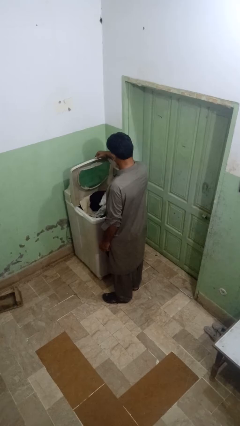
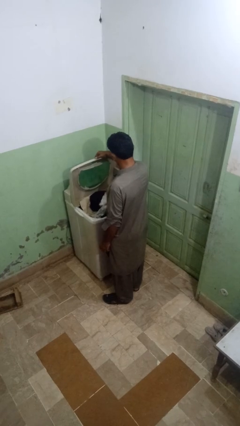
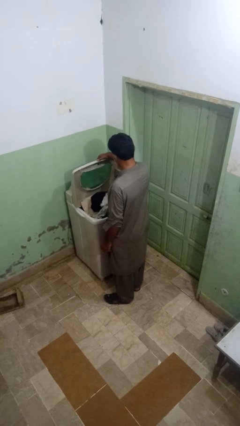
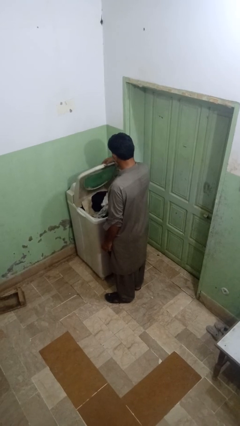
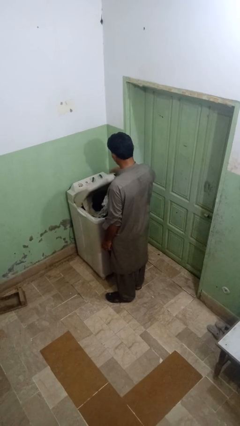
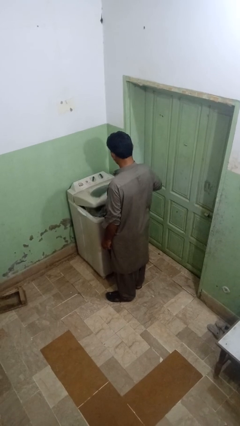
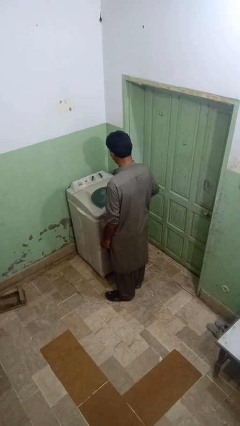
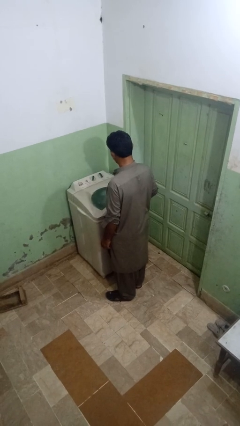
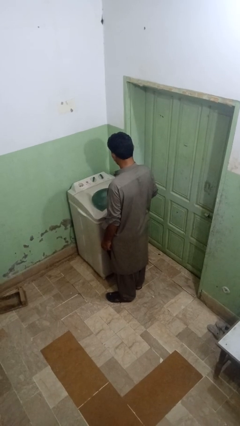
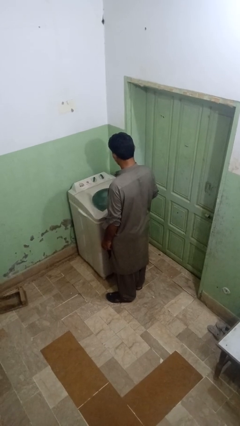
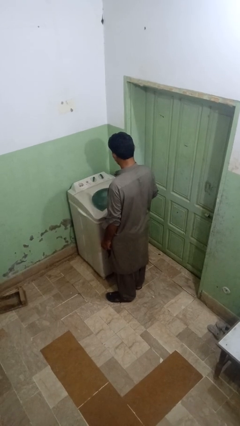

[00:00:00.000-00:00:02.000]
person closes clothes washer

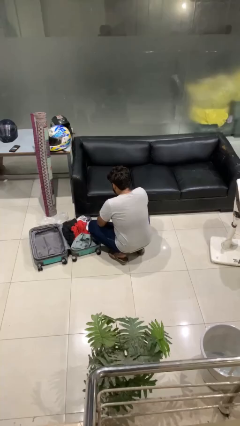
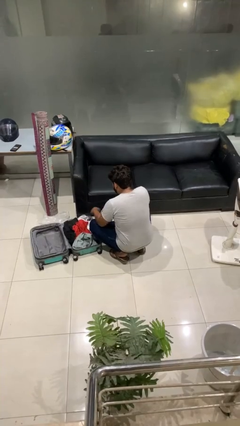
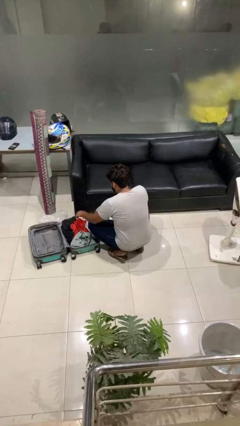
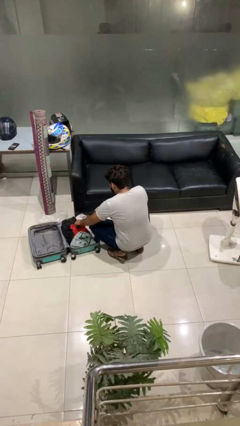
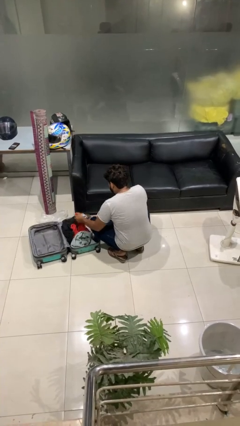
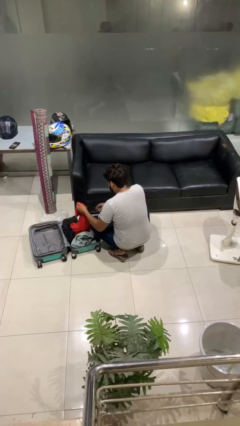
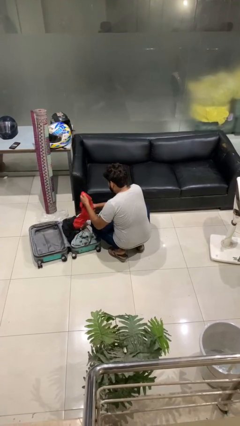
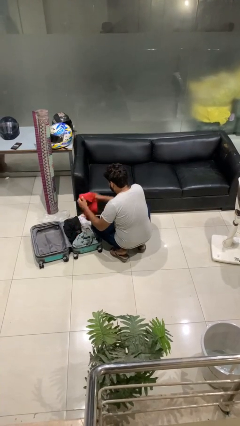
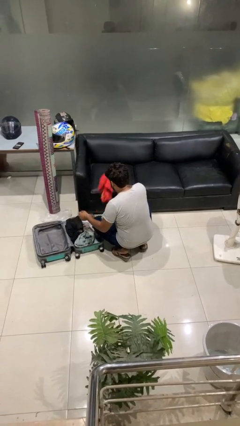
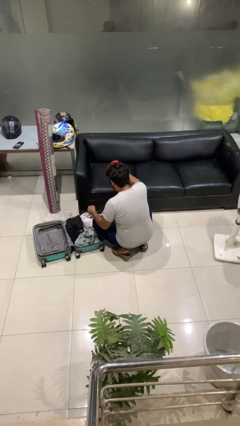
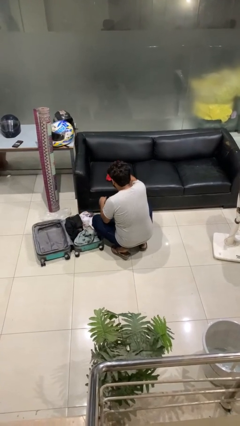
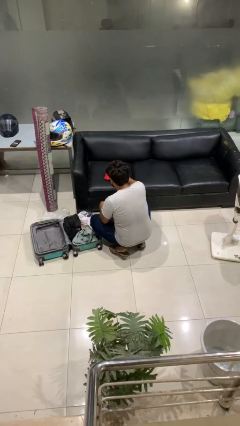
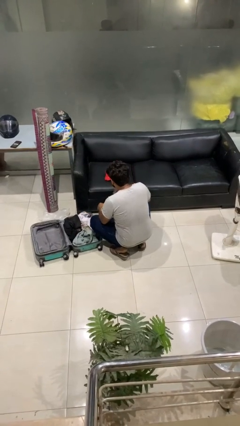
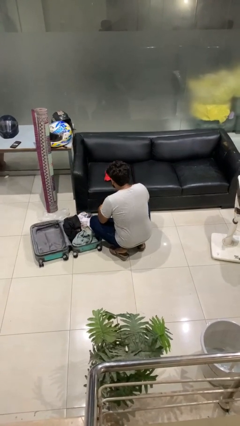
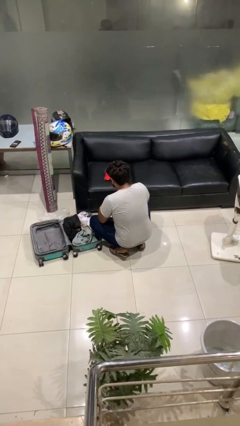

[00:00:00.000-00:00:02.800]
person unloads clothes from suitcase

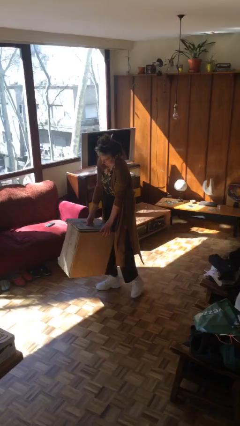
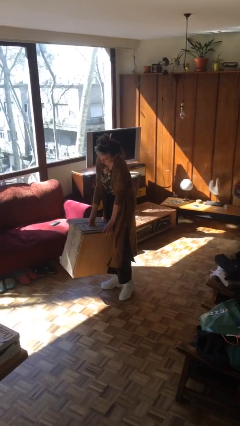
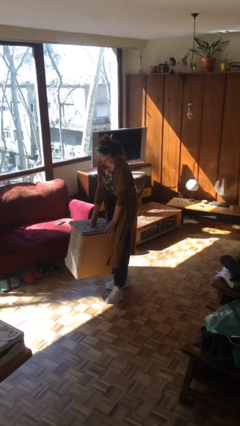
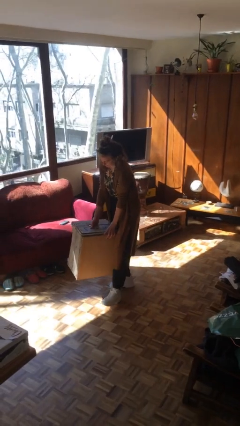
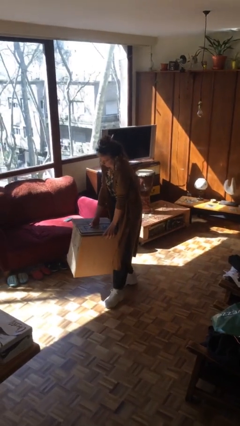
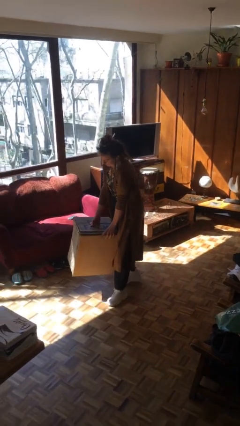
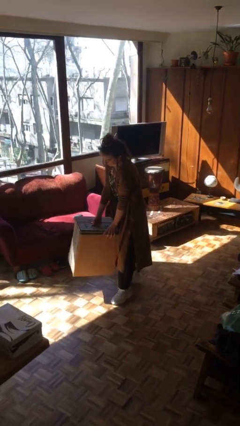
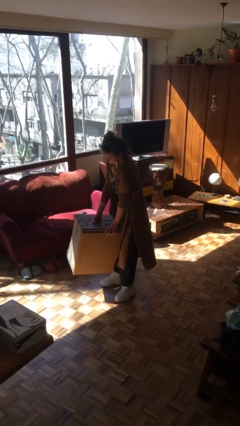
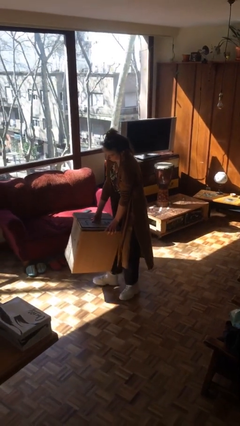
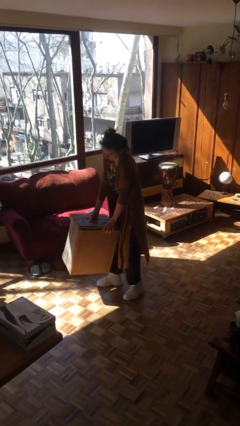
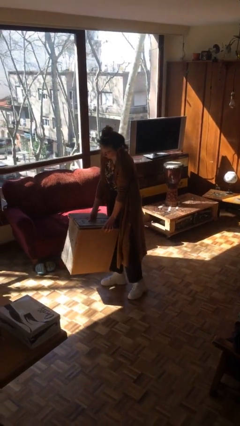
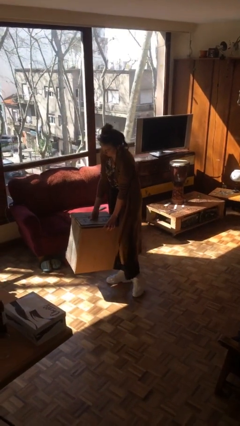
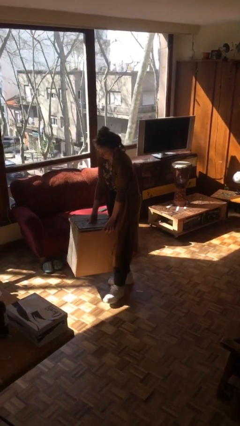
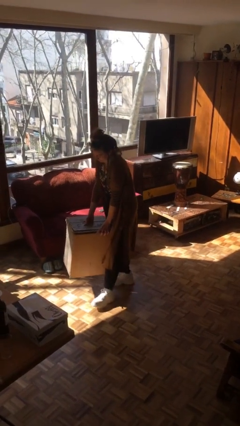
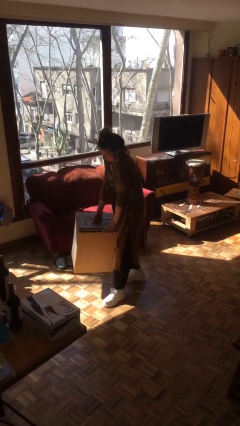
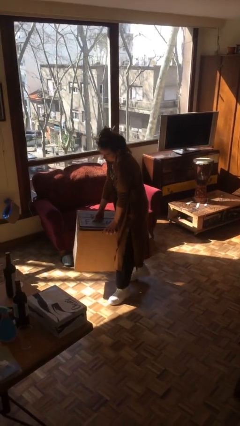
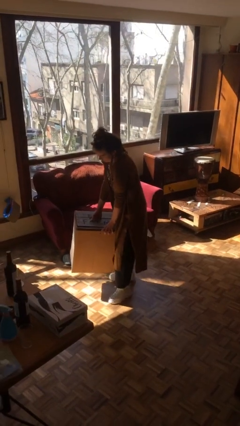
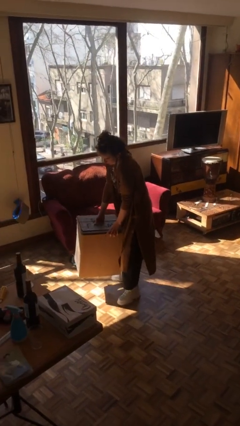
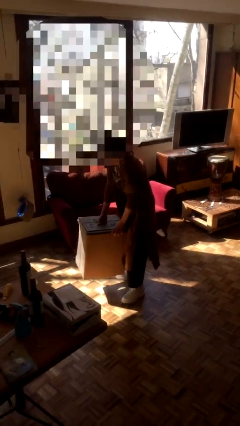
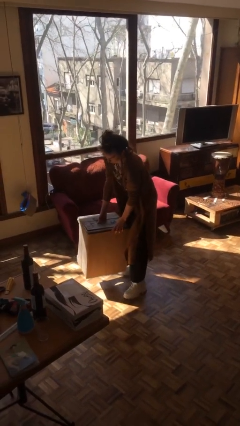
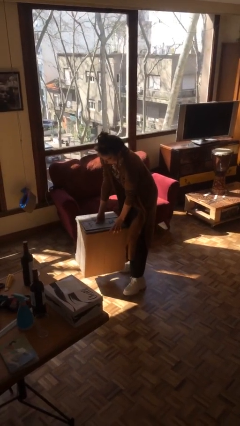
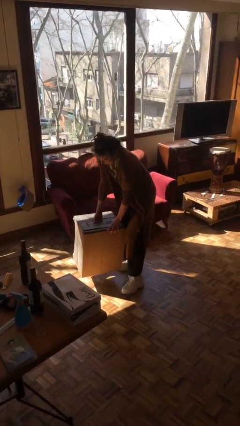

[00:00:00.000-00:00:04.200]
person carries heavy object

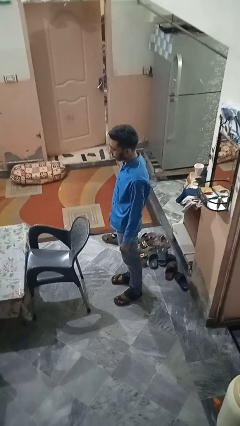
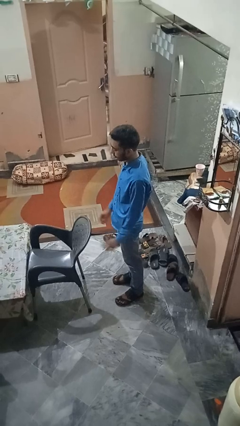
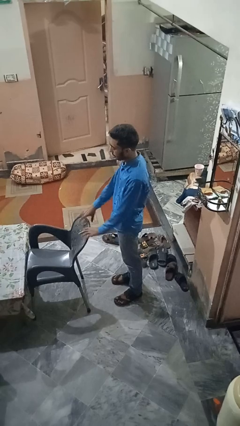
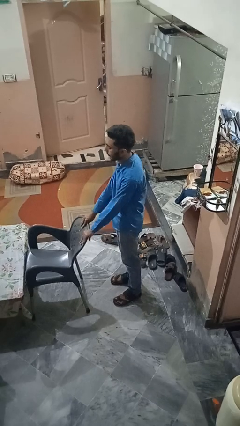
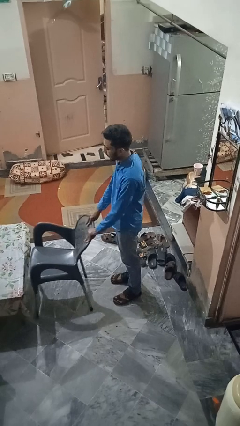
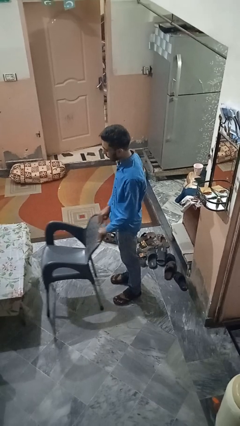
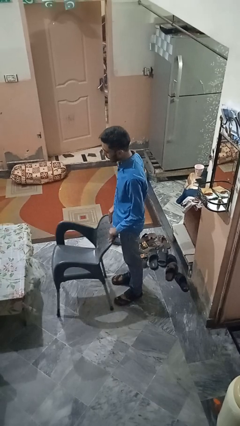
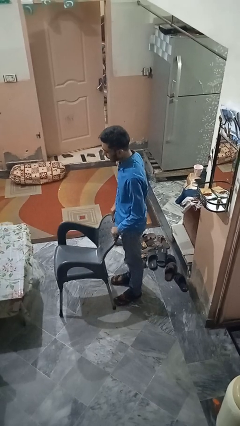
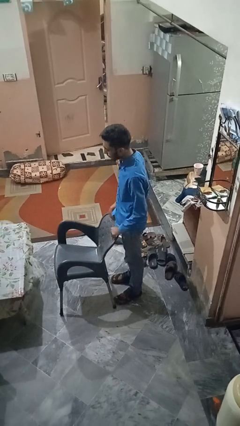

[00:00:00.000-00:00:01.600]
person pulls out chair

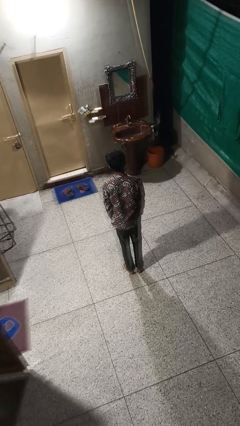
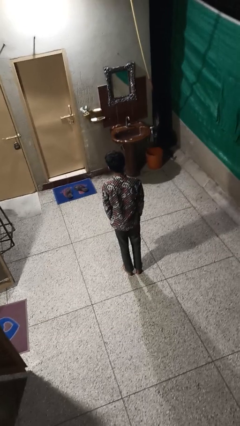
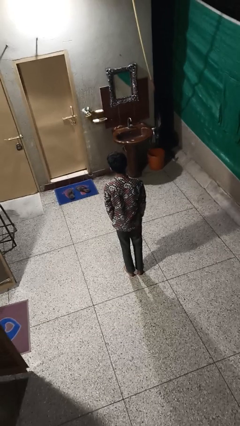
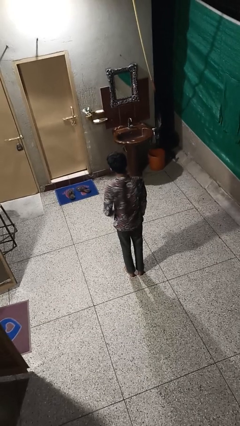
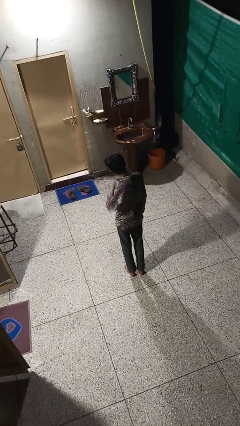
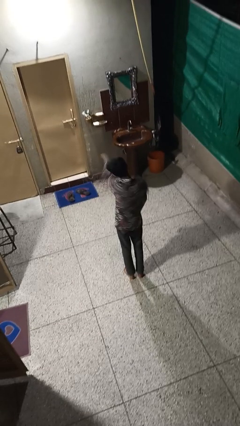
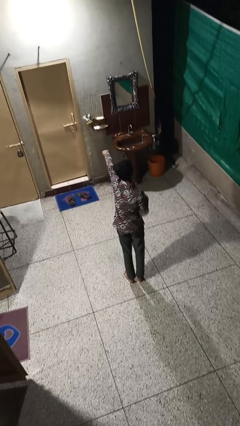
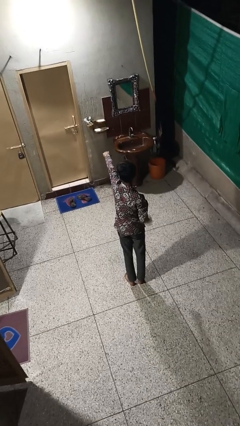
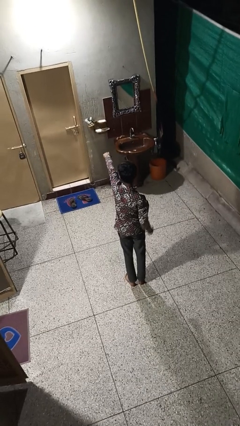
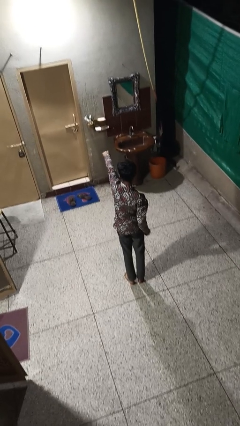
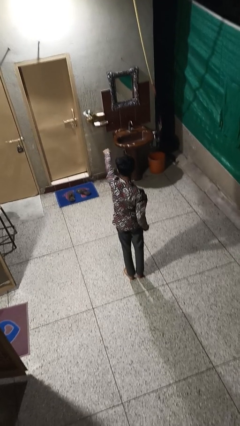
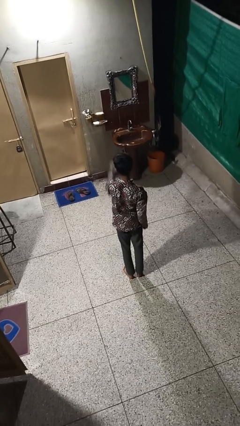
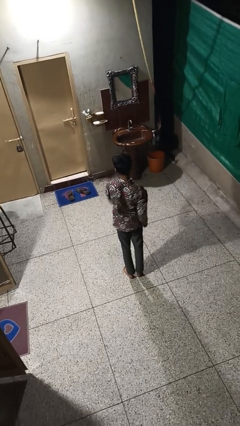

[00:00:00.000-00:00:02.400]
person punches

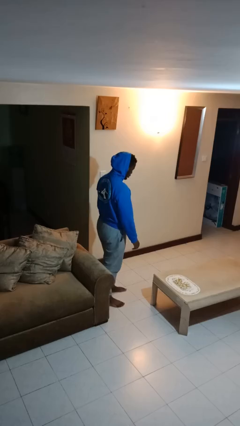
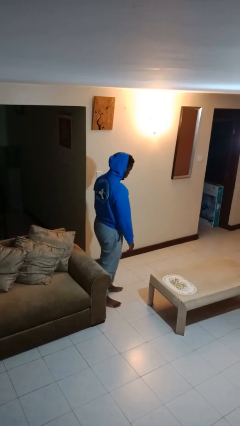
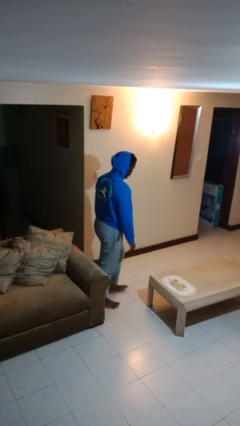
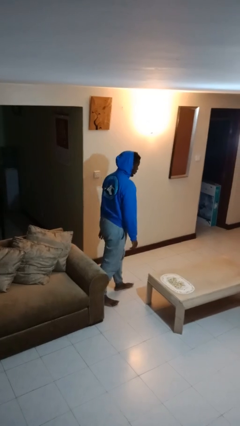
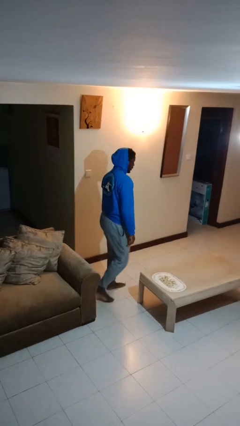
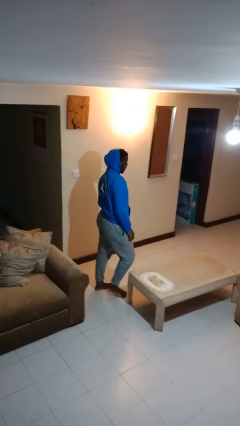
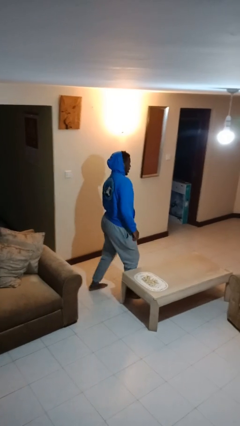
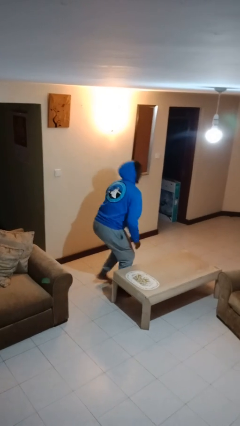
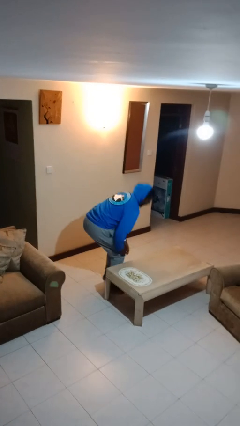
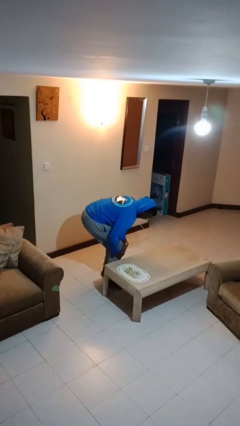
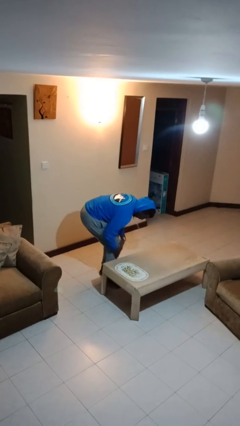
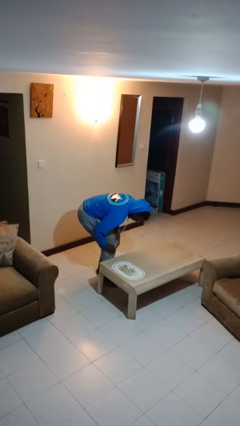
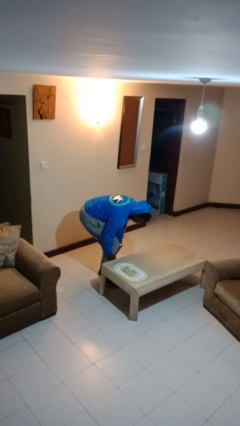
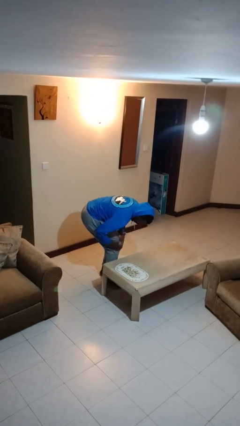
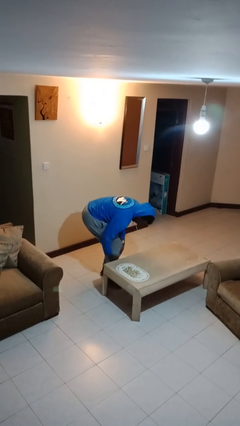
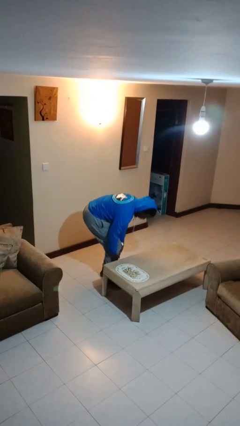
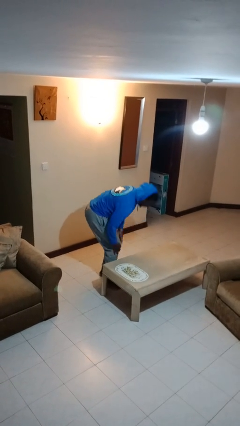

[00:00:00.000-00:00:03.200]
person bumps into table

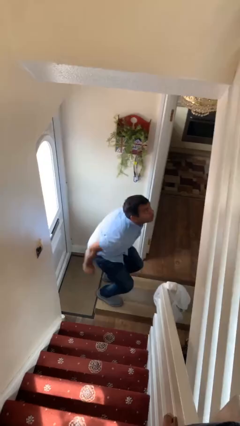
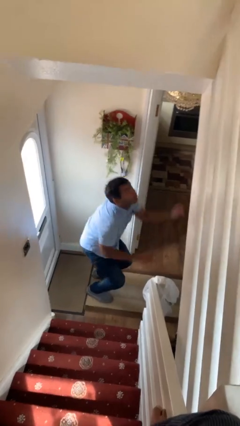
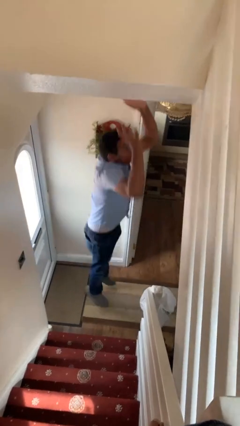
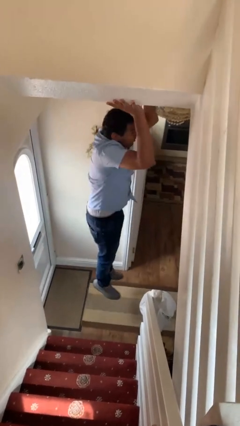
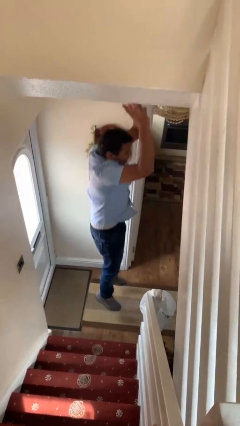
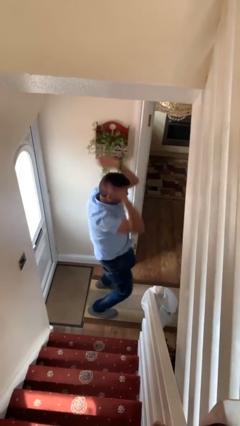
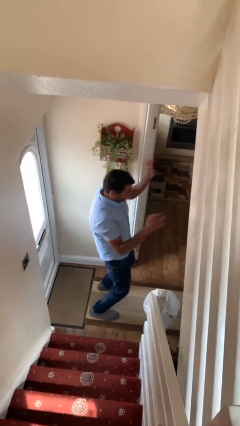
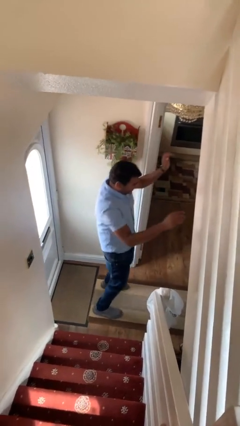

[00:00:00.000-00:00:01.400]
person jumps
